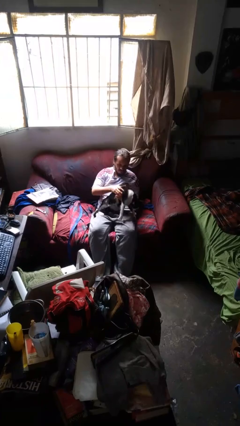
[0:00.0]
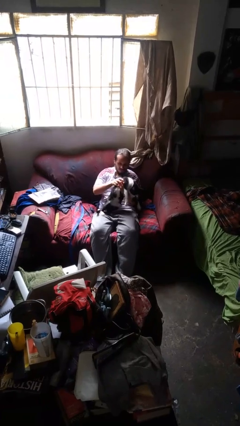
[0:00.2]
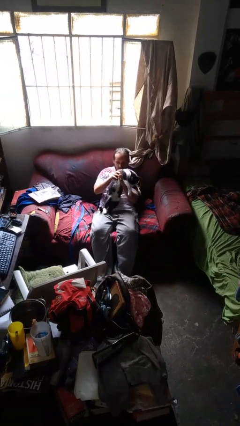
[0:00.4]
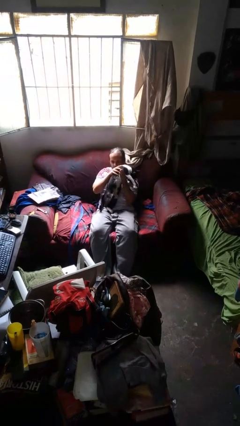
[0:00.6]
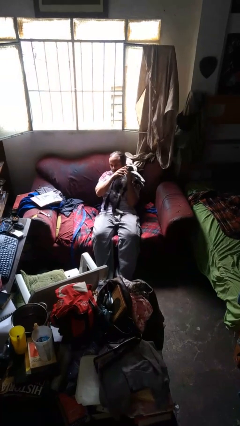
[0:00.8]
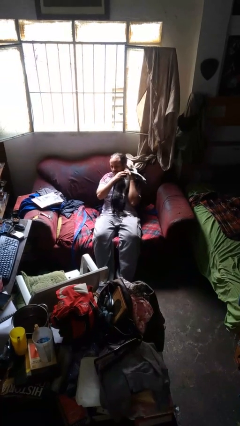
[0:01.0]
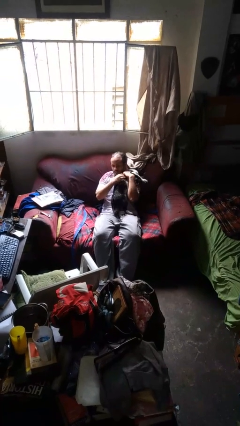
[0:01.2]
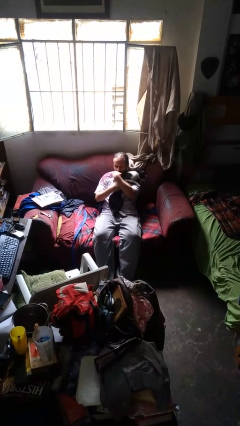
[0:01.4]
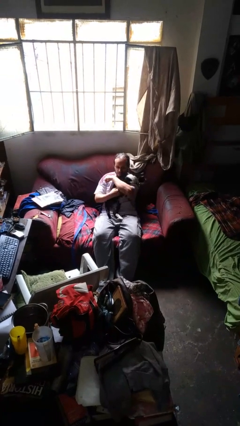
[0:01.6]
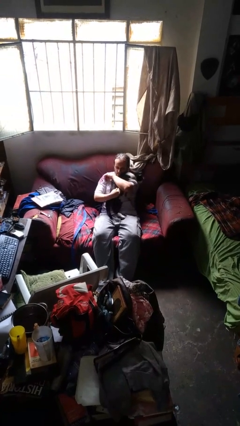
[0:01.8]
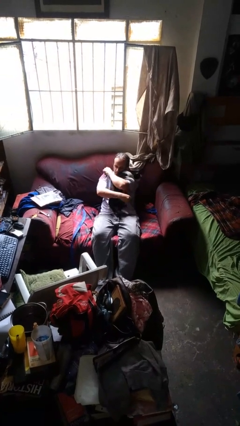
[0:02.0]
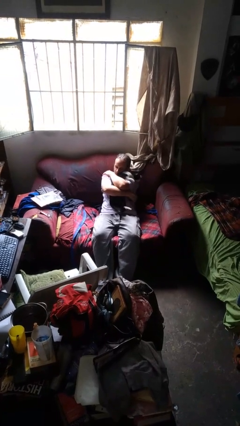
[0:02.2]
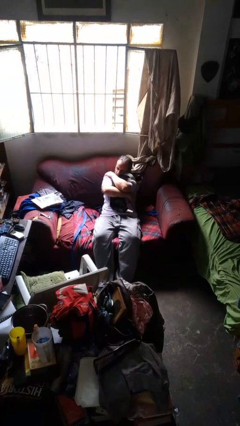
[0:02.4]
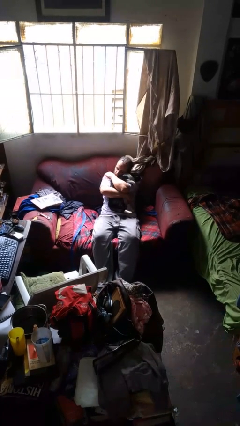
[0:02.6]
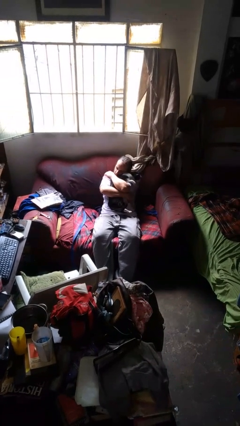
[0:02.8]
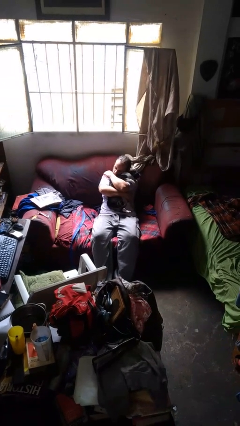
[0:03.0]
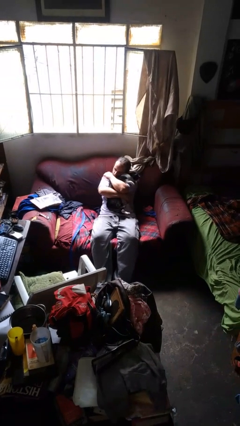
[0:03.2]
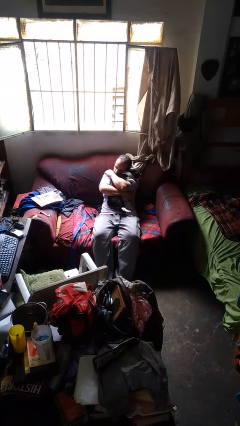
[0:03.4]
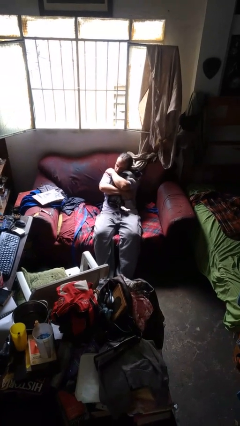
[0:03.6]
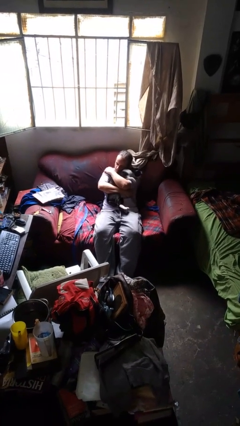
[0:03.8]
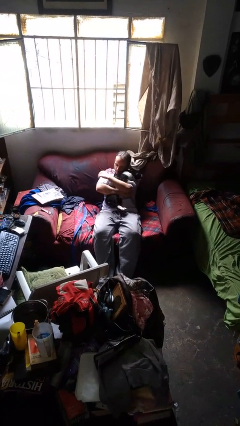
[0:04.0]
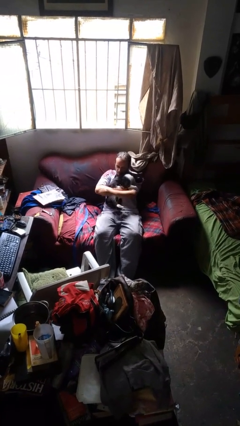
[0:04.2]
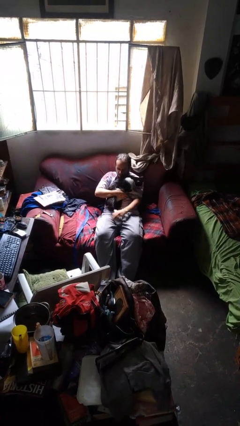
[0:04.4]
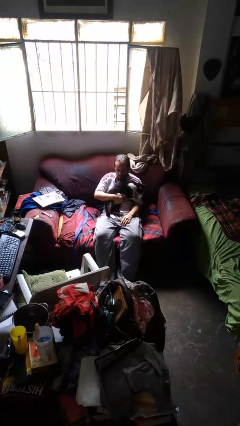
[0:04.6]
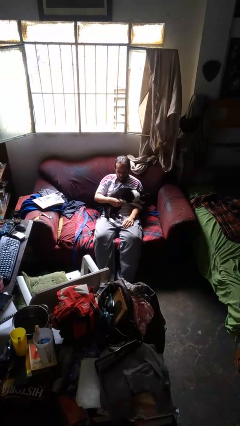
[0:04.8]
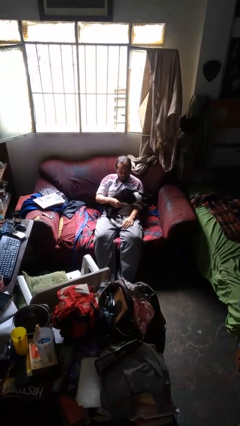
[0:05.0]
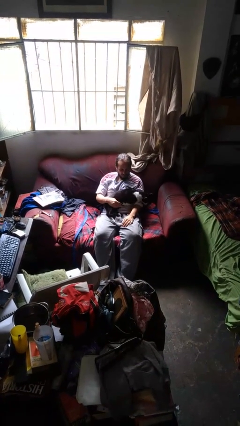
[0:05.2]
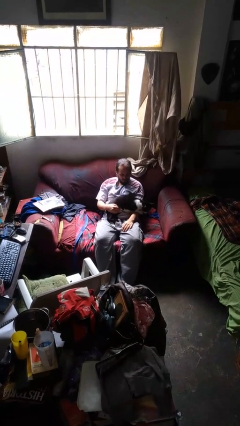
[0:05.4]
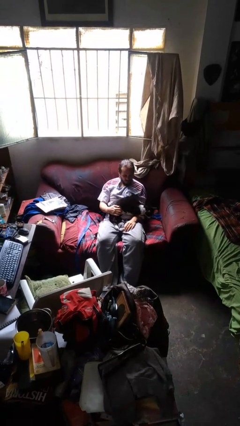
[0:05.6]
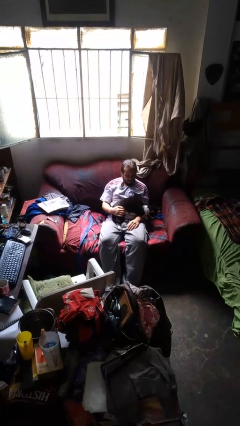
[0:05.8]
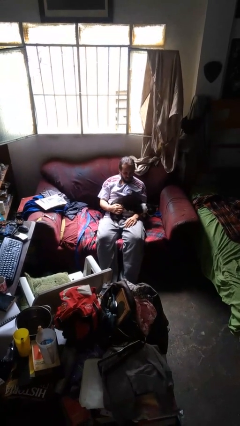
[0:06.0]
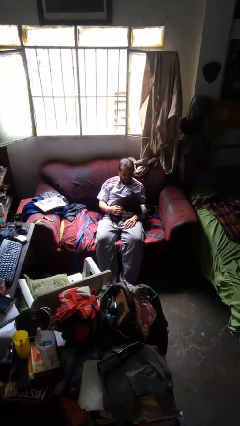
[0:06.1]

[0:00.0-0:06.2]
person hugs dog

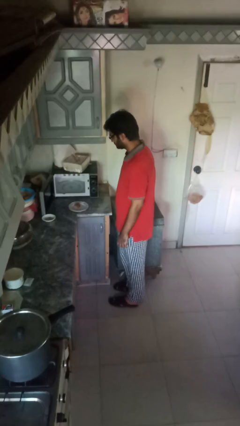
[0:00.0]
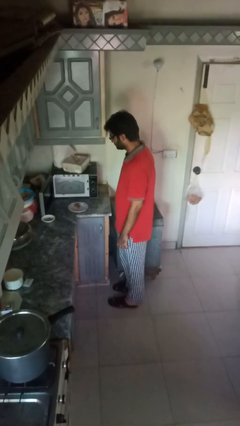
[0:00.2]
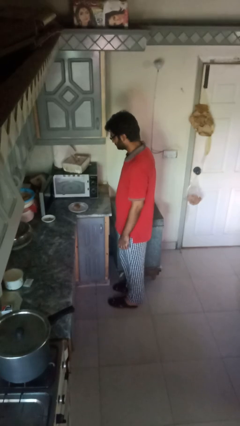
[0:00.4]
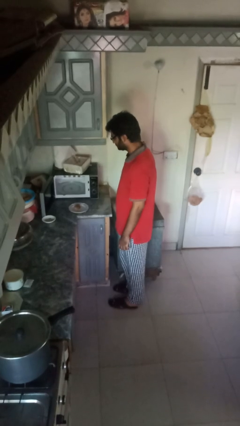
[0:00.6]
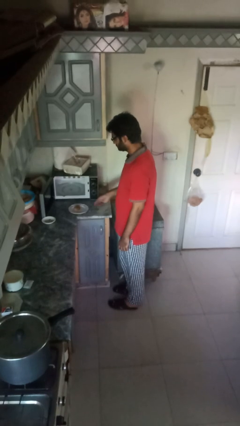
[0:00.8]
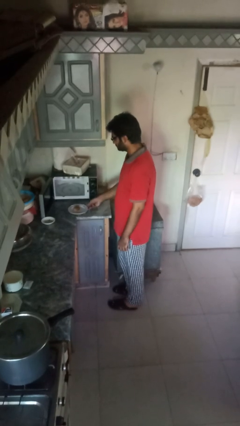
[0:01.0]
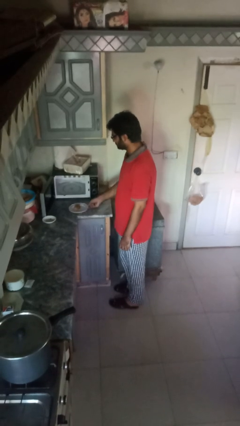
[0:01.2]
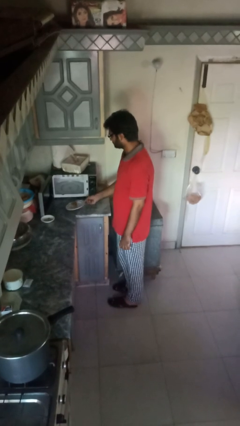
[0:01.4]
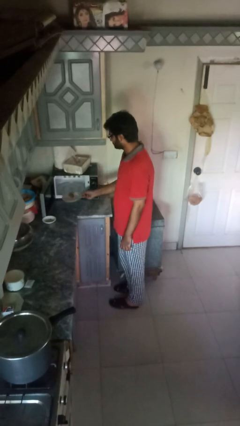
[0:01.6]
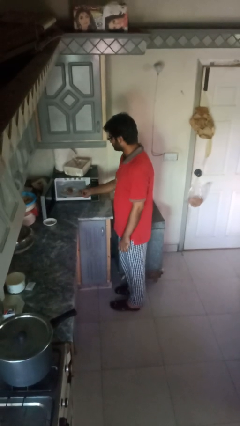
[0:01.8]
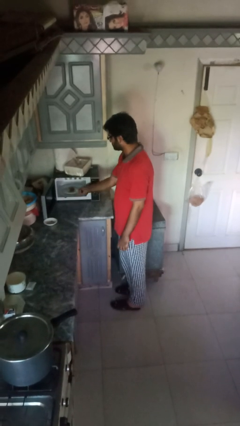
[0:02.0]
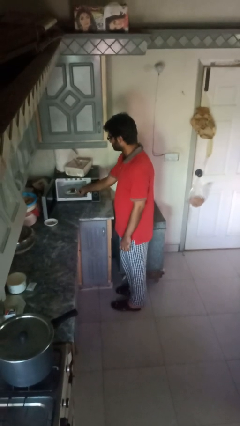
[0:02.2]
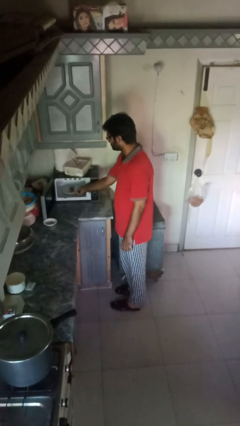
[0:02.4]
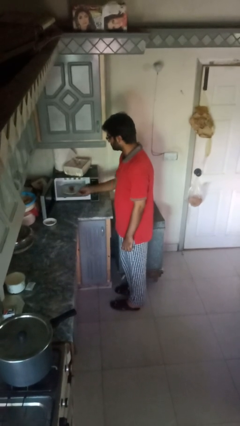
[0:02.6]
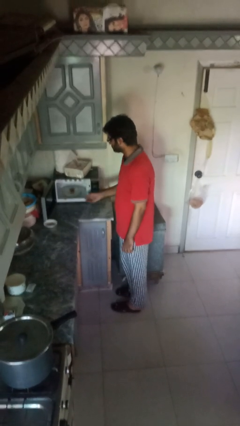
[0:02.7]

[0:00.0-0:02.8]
person puts object into oven

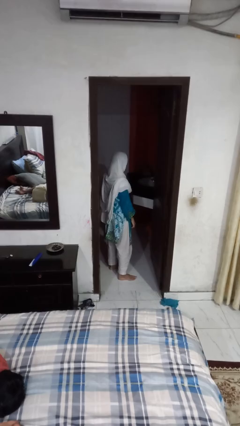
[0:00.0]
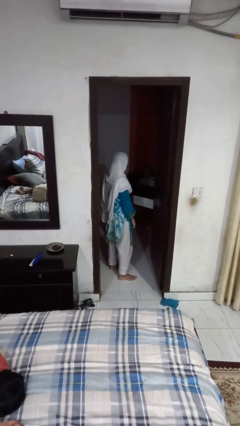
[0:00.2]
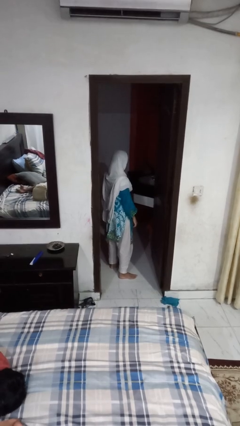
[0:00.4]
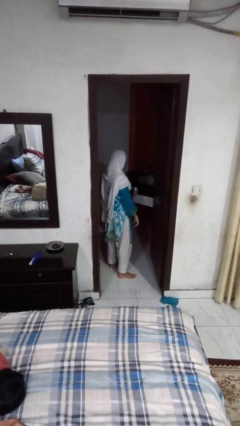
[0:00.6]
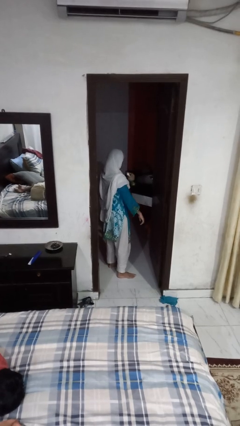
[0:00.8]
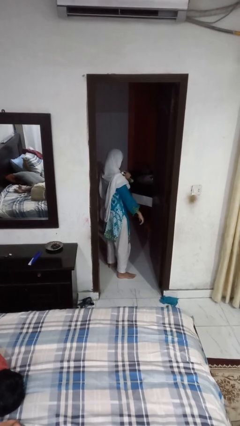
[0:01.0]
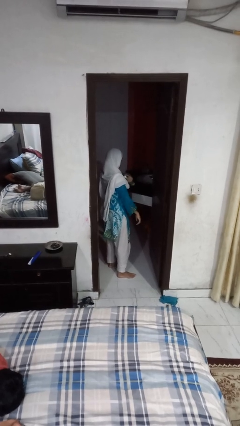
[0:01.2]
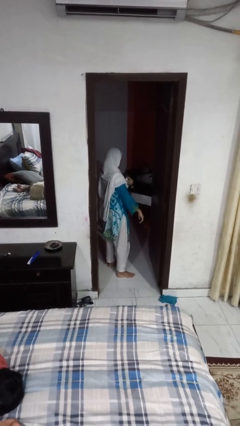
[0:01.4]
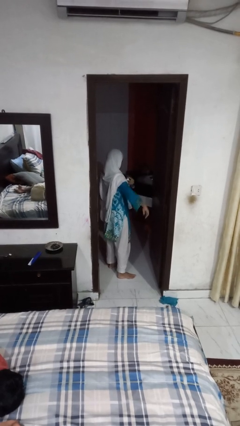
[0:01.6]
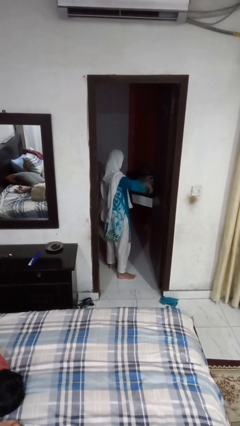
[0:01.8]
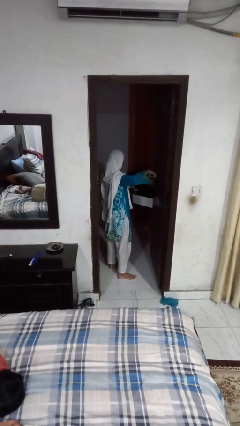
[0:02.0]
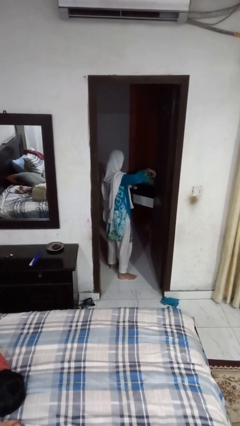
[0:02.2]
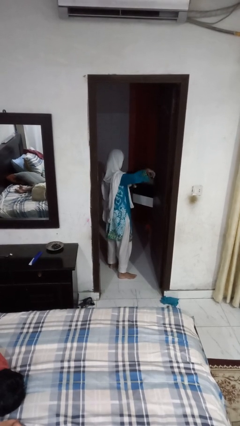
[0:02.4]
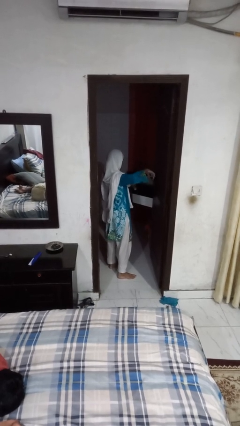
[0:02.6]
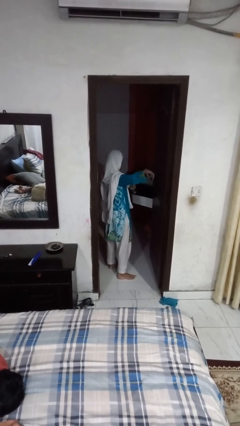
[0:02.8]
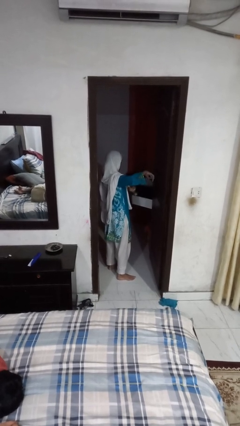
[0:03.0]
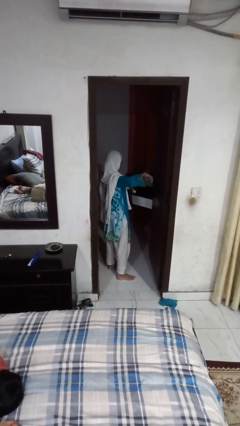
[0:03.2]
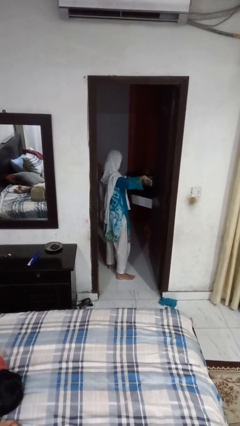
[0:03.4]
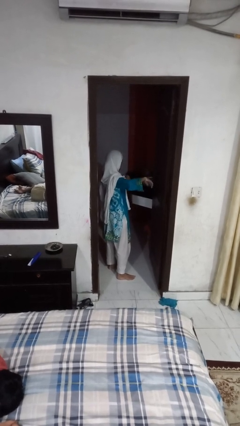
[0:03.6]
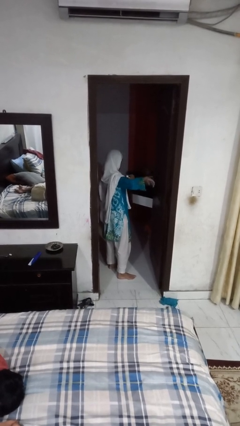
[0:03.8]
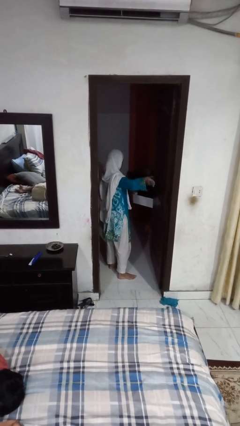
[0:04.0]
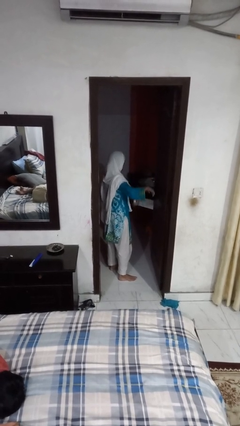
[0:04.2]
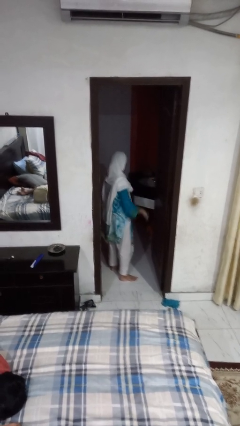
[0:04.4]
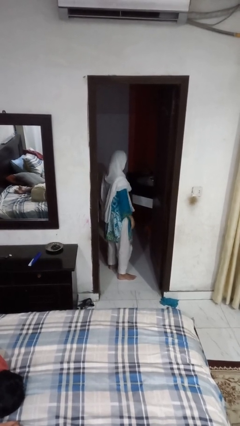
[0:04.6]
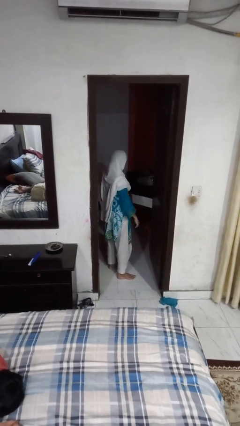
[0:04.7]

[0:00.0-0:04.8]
person applies deodorant

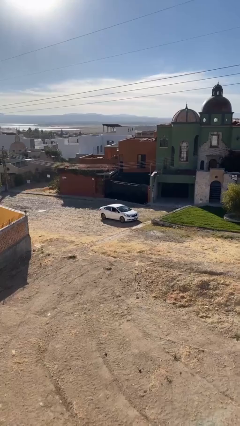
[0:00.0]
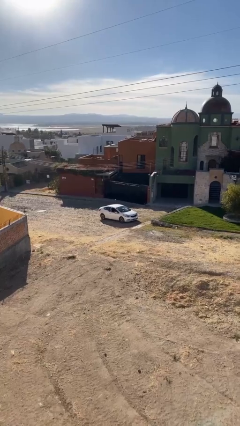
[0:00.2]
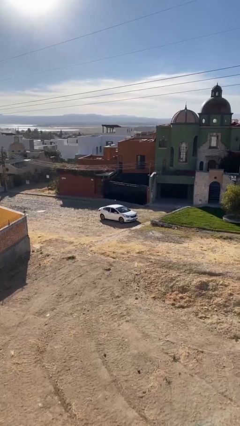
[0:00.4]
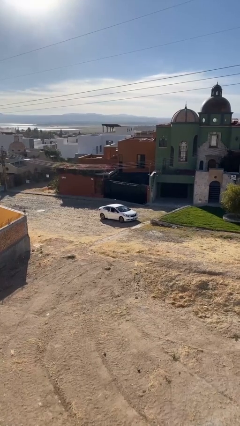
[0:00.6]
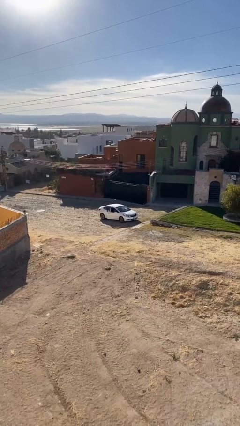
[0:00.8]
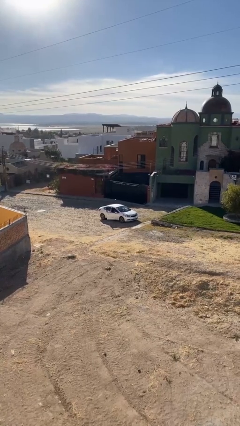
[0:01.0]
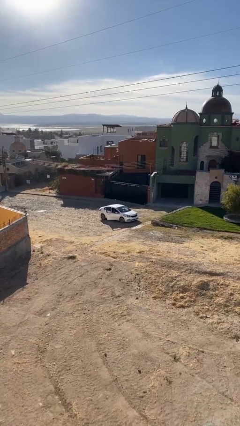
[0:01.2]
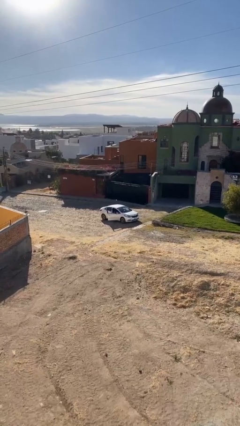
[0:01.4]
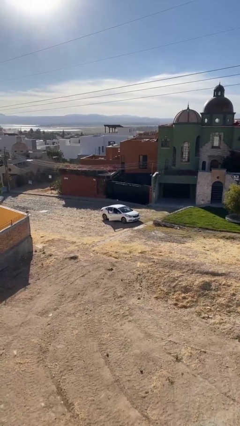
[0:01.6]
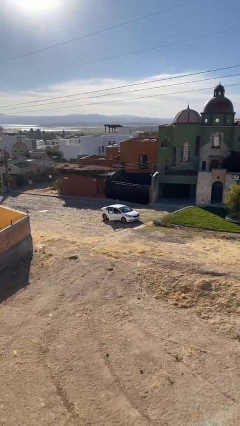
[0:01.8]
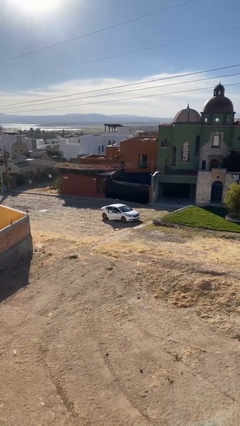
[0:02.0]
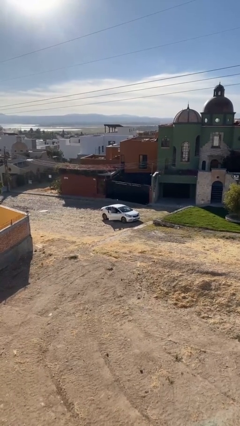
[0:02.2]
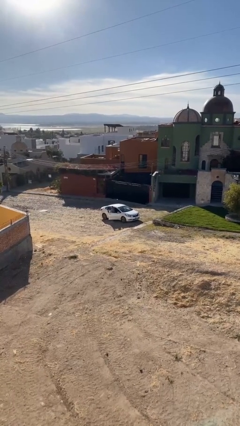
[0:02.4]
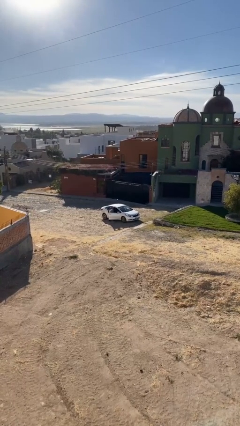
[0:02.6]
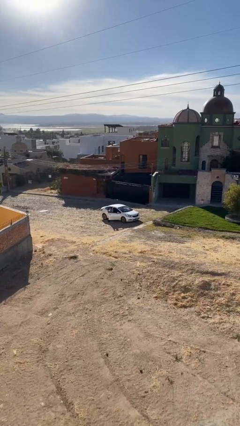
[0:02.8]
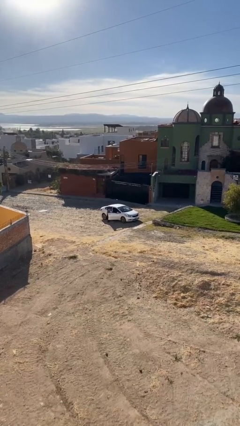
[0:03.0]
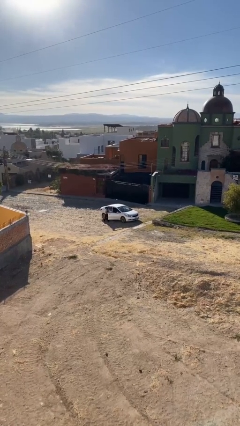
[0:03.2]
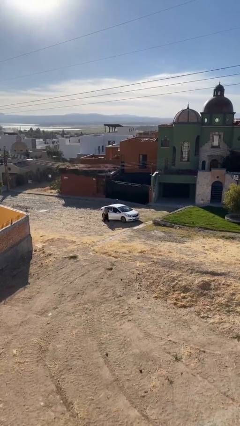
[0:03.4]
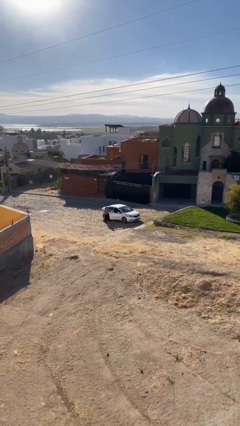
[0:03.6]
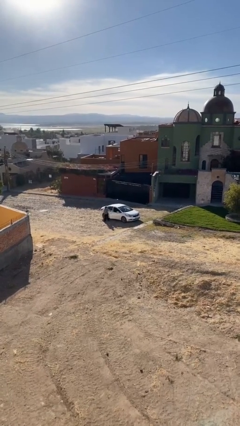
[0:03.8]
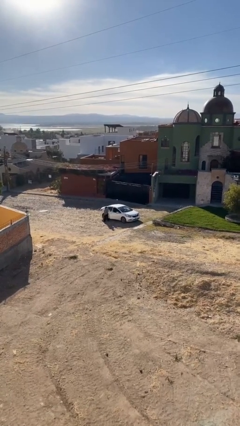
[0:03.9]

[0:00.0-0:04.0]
car drops off person
